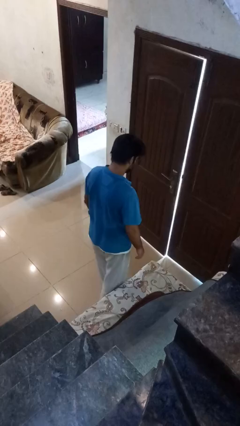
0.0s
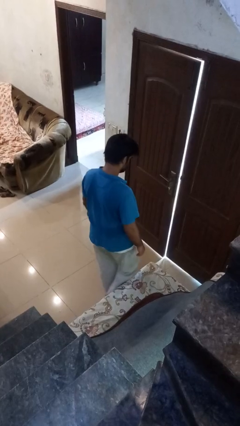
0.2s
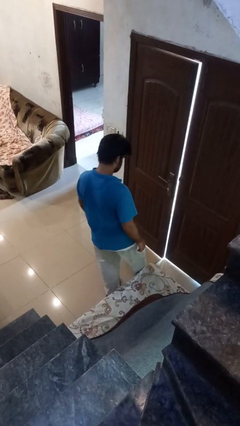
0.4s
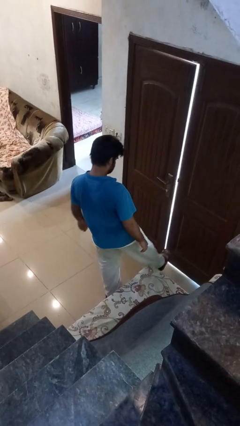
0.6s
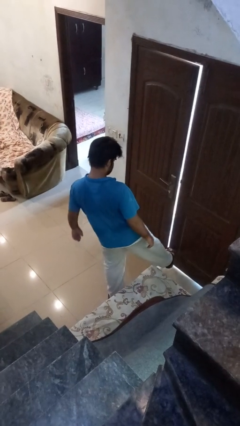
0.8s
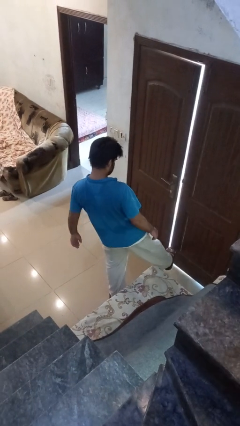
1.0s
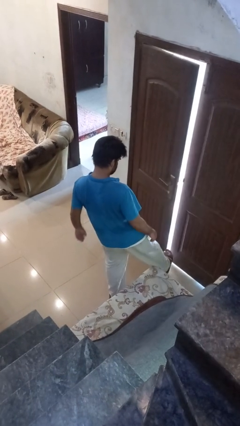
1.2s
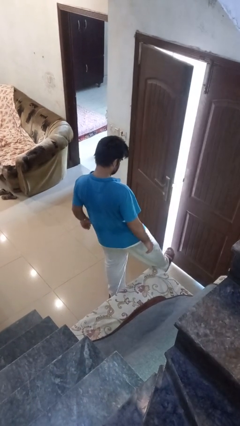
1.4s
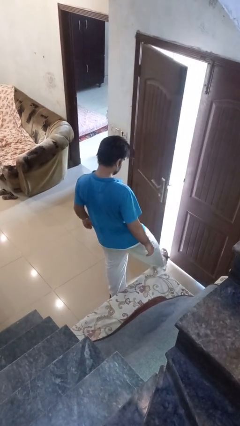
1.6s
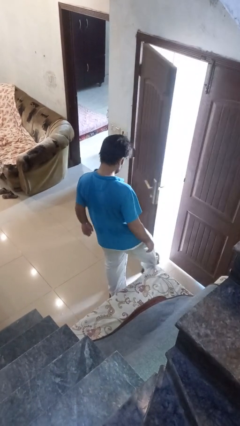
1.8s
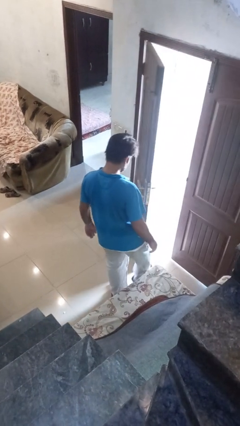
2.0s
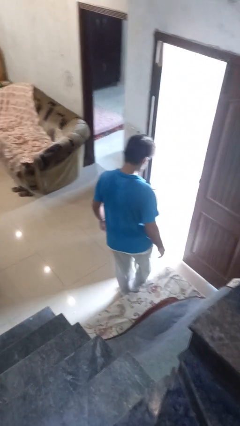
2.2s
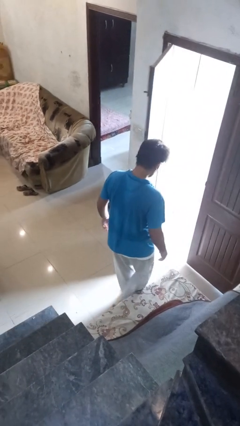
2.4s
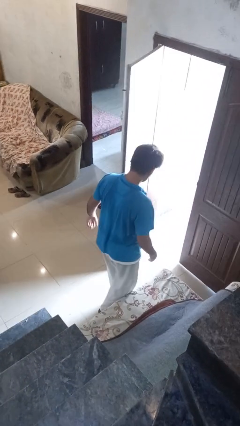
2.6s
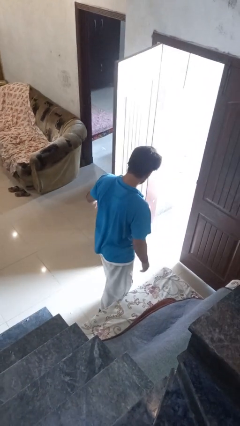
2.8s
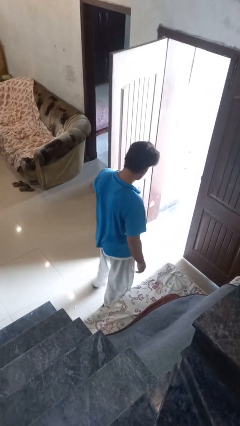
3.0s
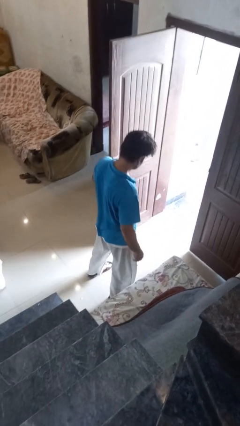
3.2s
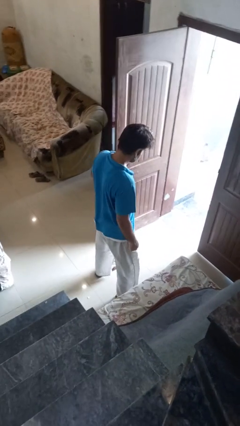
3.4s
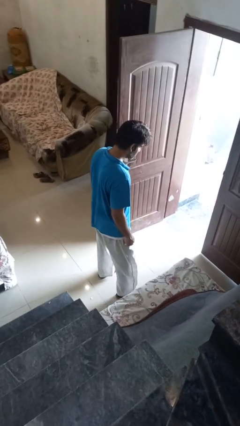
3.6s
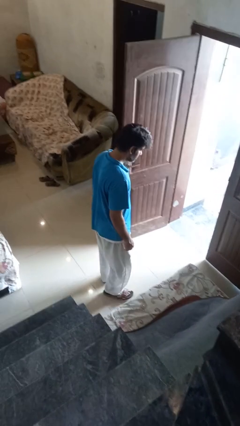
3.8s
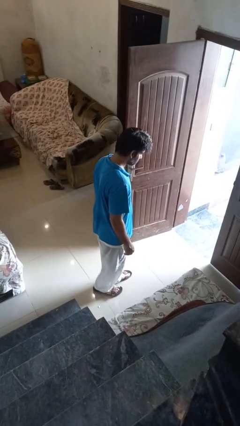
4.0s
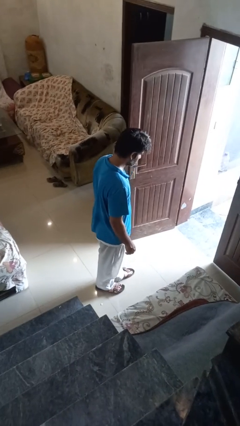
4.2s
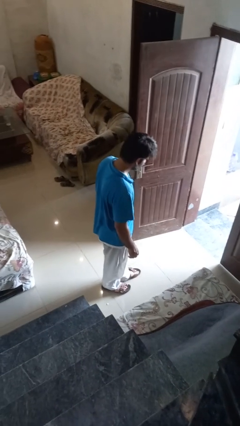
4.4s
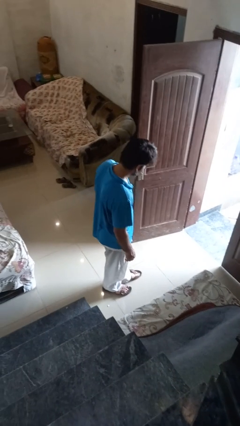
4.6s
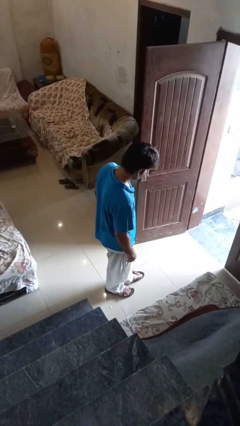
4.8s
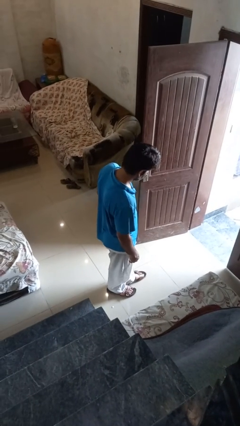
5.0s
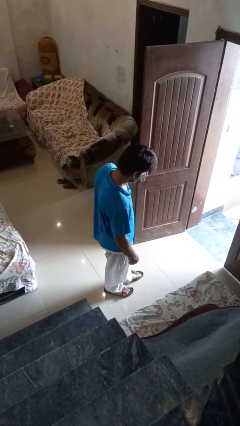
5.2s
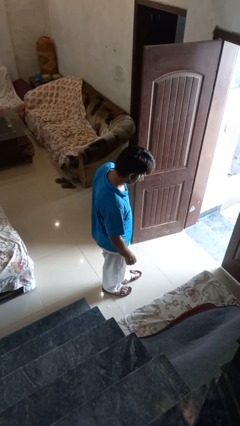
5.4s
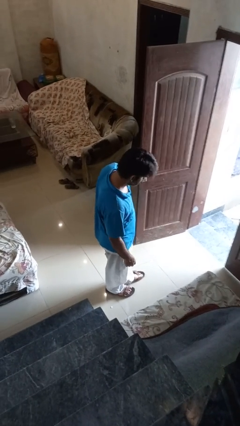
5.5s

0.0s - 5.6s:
person opens facility door

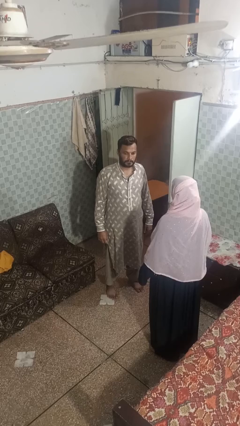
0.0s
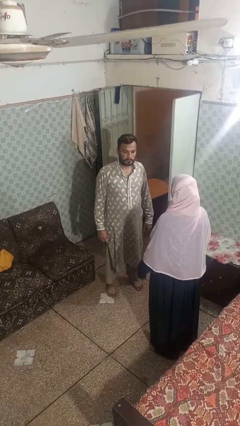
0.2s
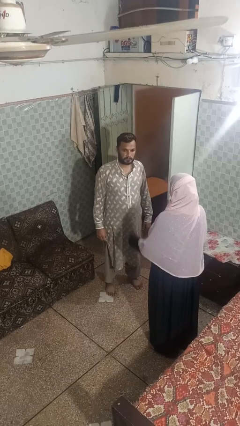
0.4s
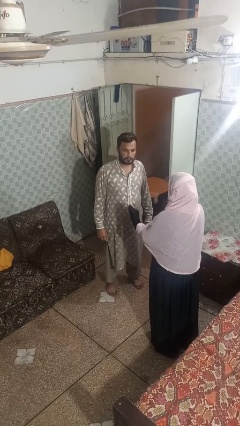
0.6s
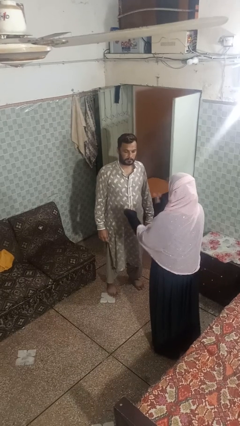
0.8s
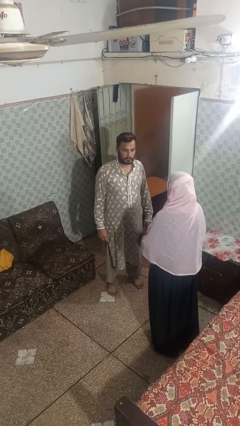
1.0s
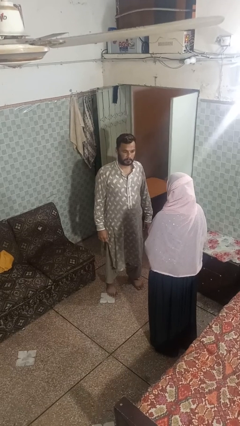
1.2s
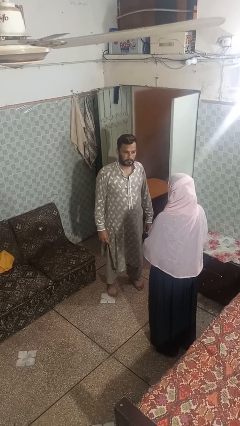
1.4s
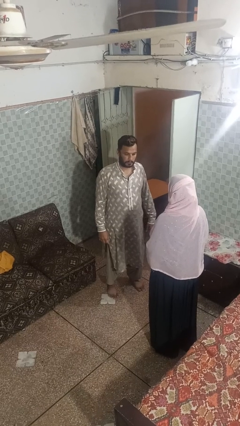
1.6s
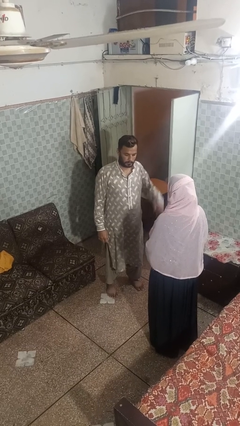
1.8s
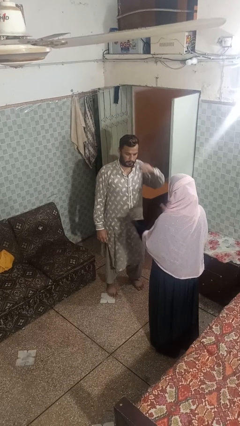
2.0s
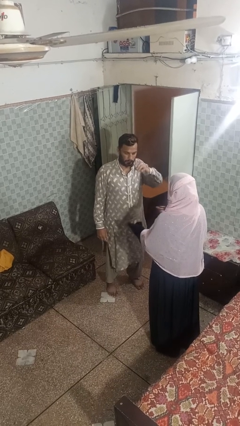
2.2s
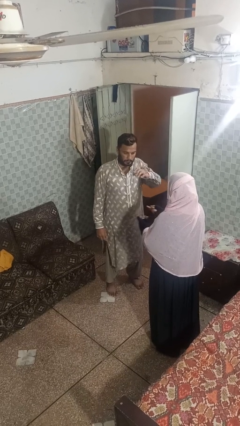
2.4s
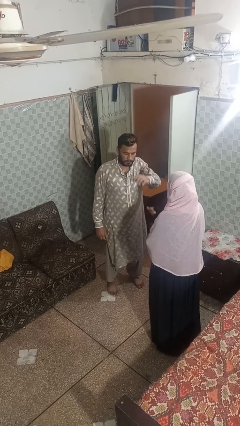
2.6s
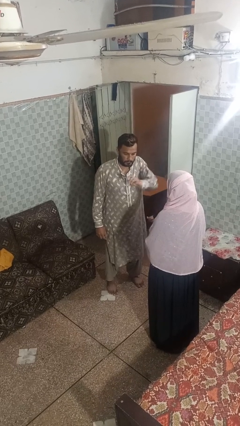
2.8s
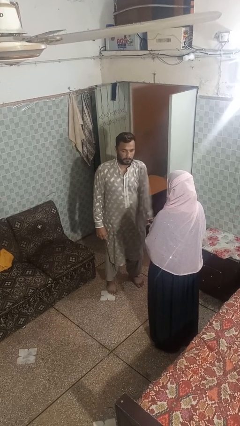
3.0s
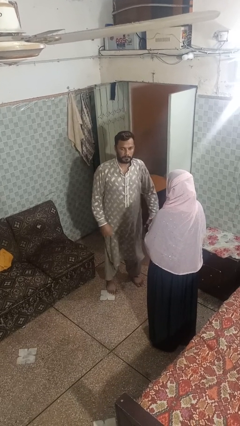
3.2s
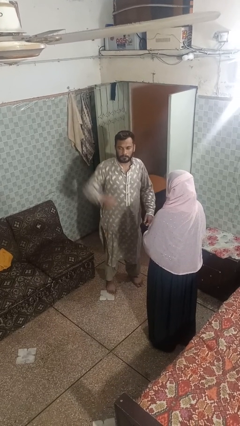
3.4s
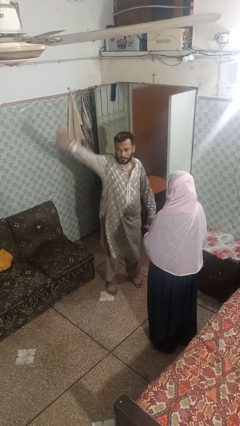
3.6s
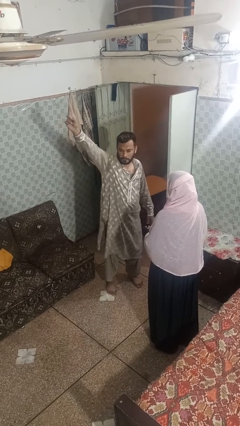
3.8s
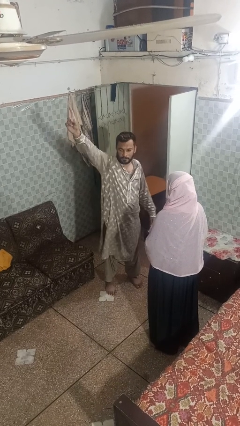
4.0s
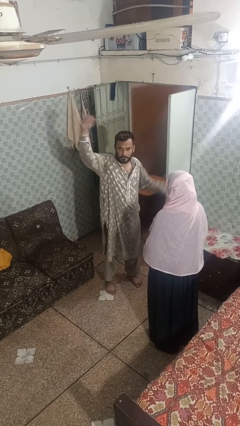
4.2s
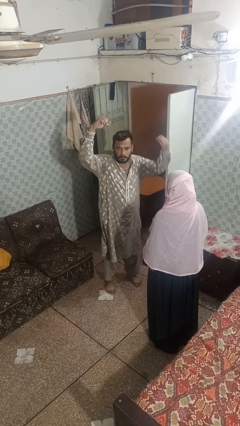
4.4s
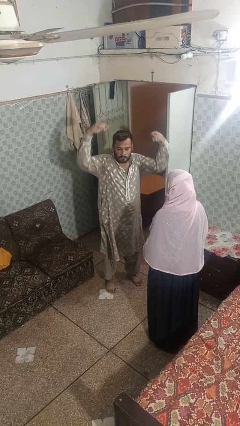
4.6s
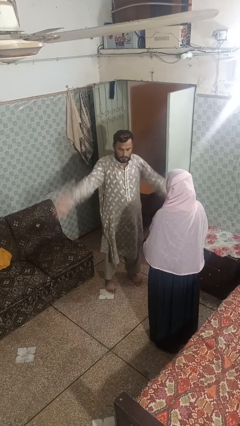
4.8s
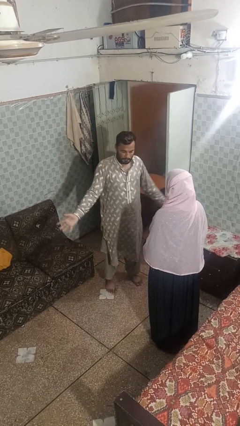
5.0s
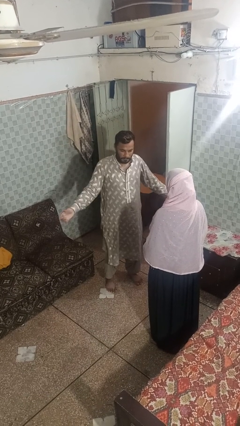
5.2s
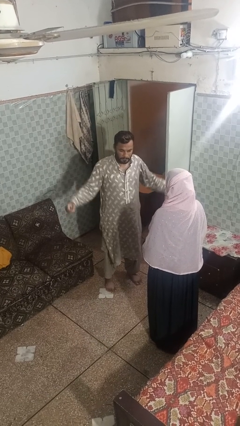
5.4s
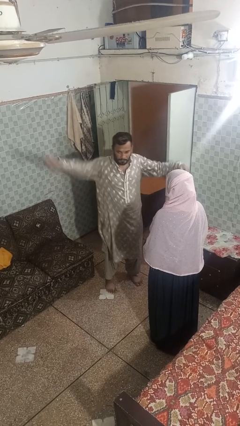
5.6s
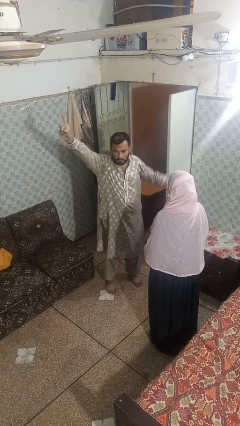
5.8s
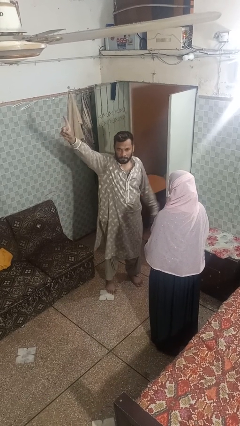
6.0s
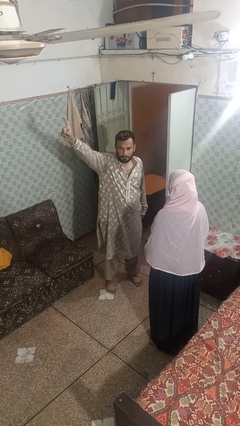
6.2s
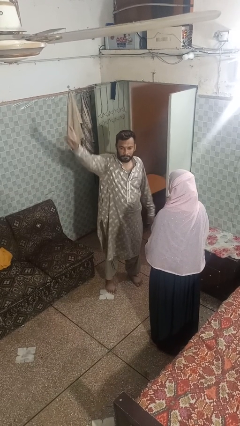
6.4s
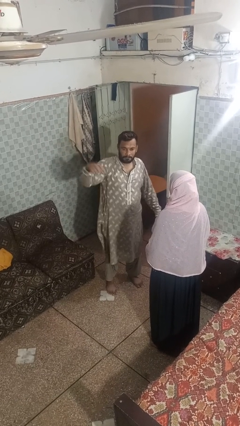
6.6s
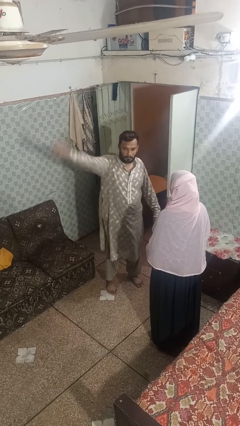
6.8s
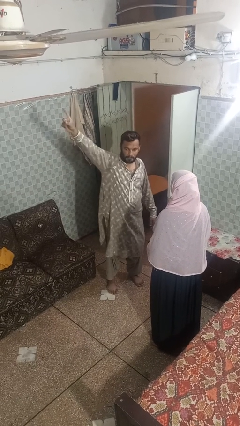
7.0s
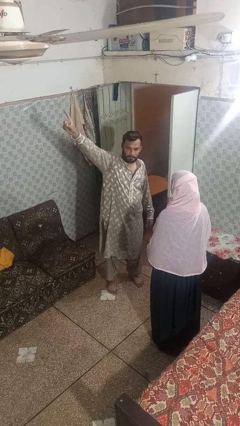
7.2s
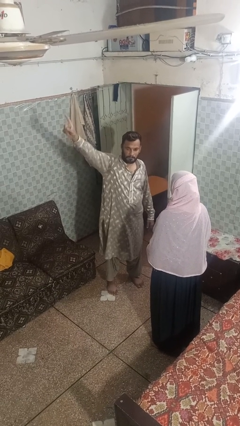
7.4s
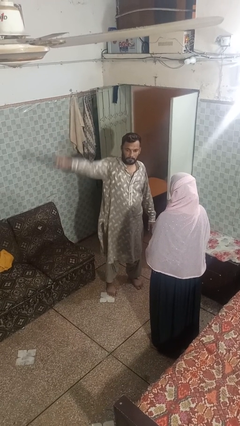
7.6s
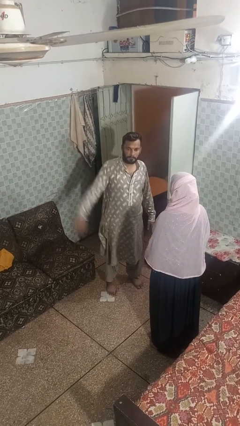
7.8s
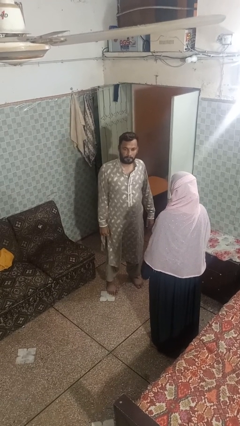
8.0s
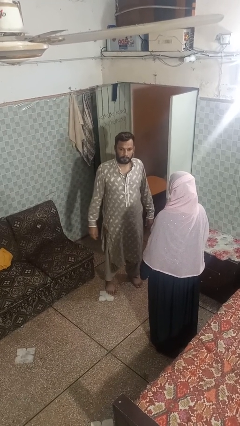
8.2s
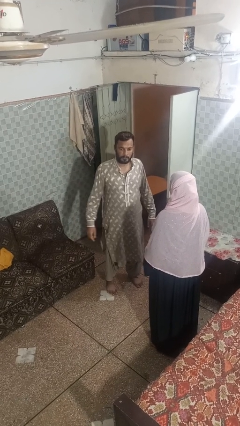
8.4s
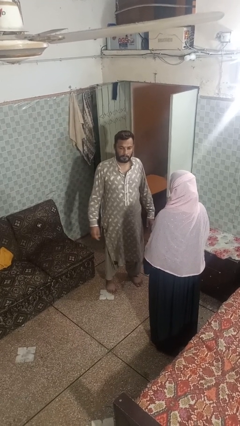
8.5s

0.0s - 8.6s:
person shoves person

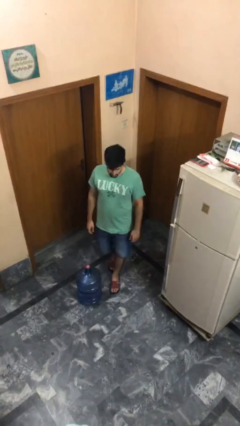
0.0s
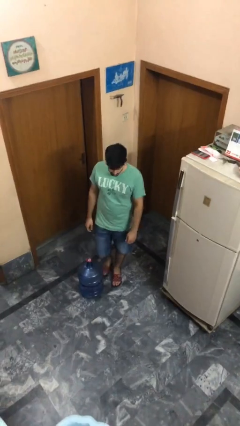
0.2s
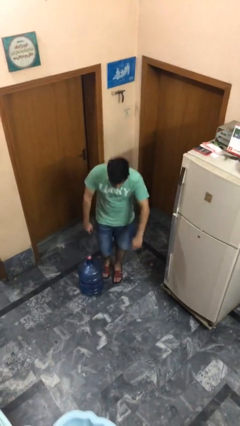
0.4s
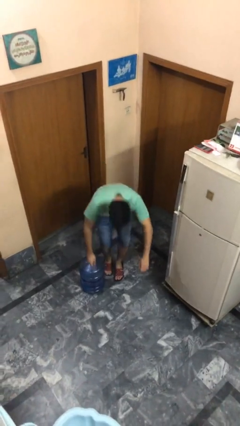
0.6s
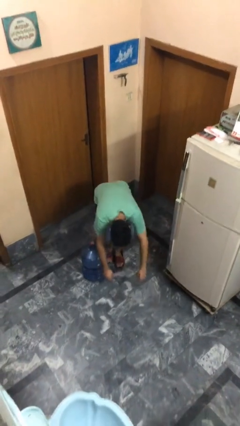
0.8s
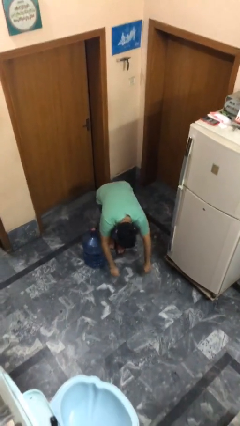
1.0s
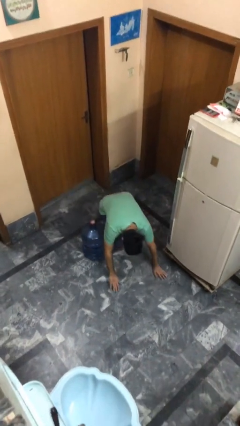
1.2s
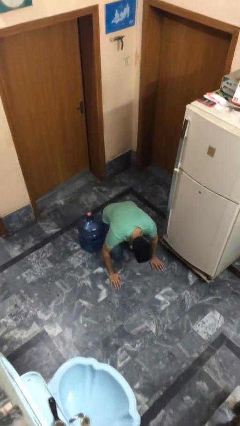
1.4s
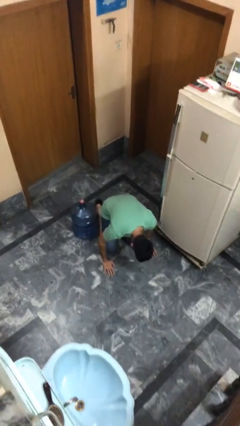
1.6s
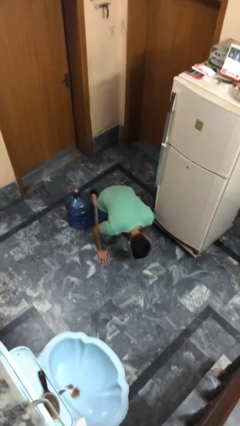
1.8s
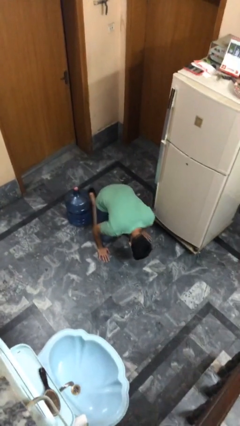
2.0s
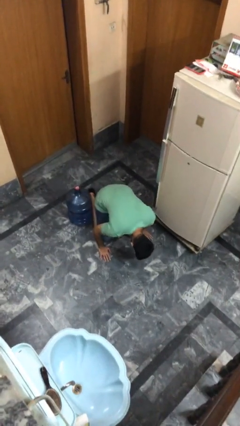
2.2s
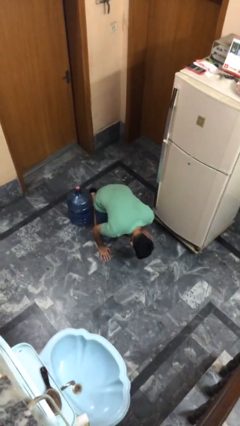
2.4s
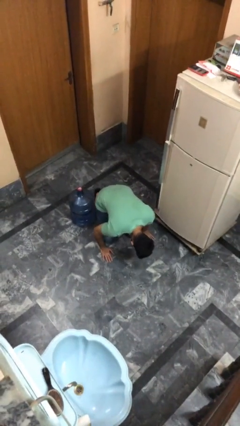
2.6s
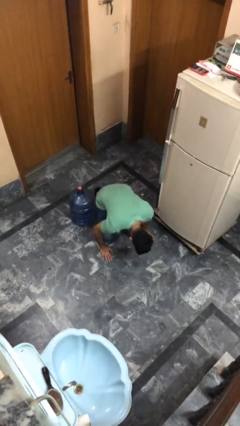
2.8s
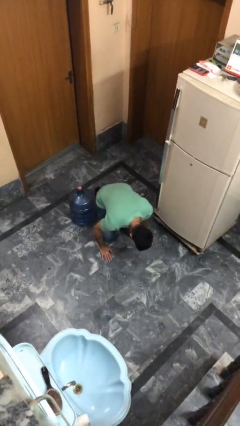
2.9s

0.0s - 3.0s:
person trips on object on floor

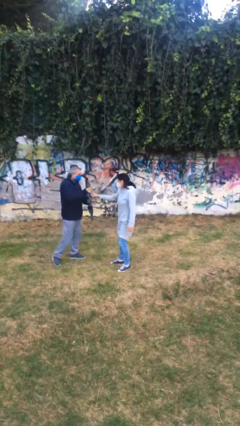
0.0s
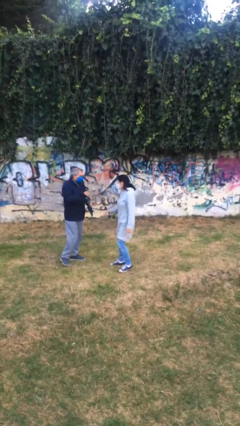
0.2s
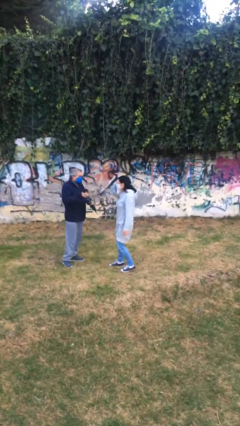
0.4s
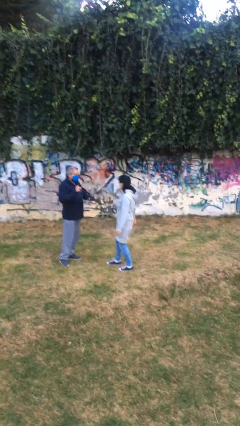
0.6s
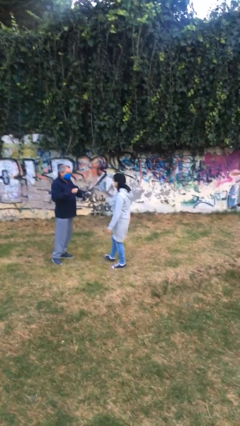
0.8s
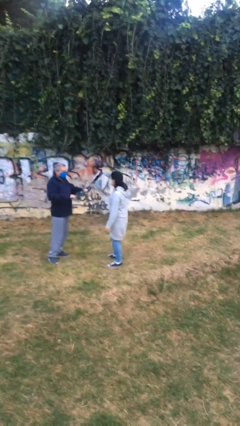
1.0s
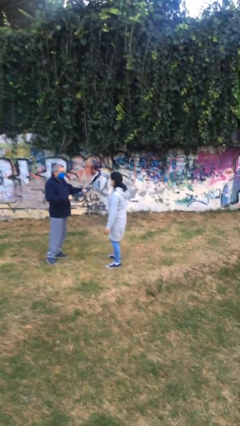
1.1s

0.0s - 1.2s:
person transfers object to person
